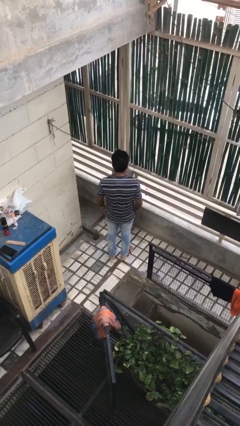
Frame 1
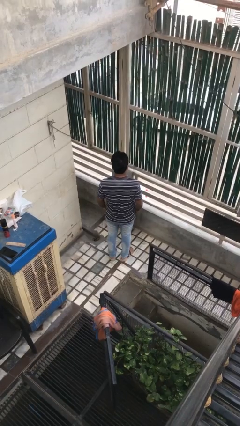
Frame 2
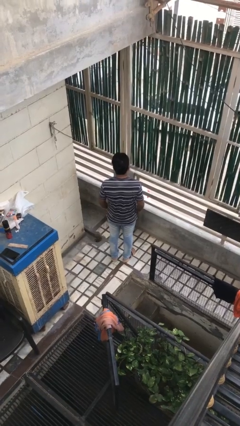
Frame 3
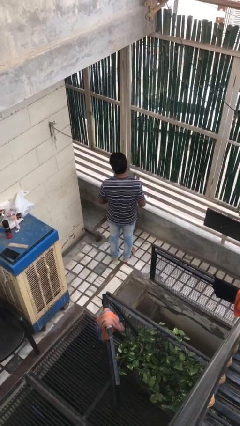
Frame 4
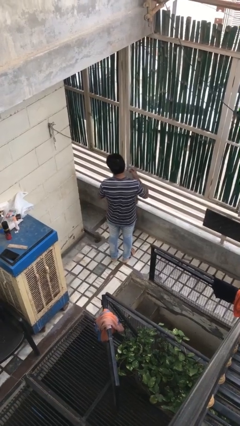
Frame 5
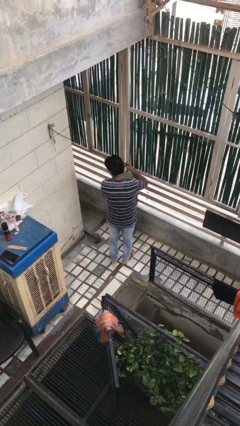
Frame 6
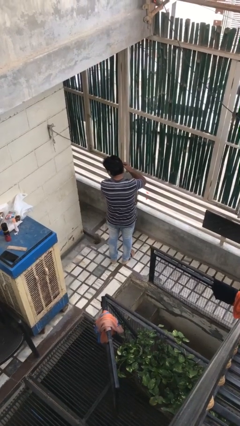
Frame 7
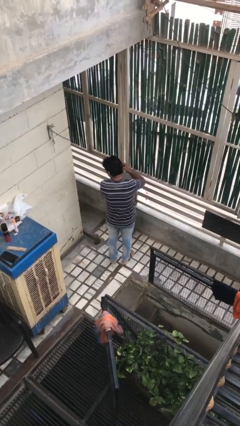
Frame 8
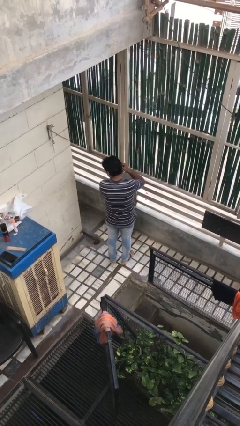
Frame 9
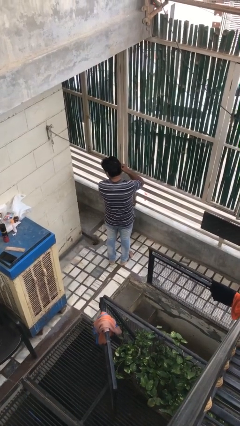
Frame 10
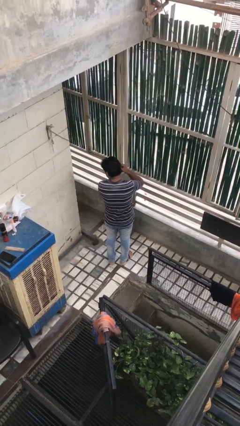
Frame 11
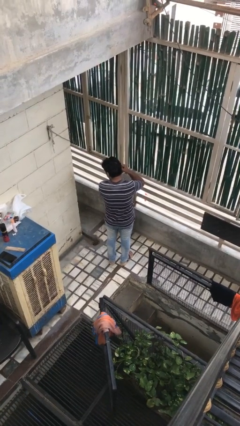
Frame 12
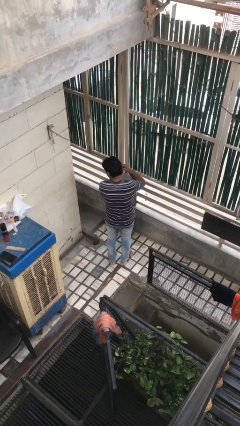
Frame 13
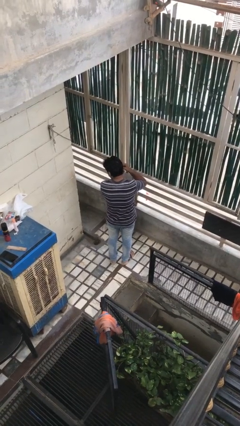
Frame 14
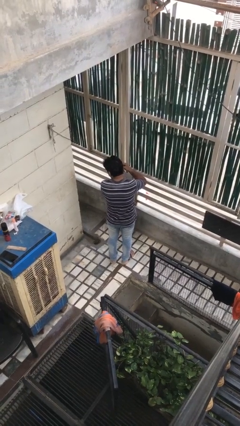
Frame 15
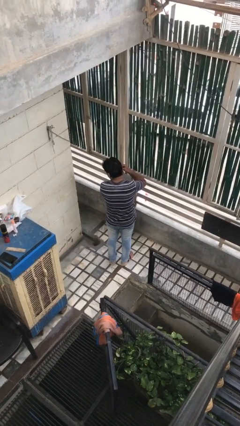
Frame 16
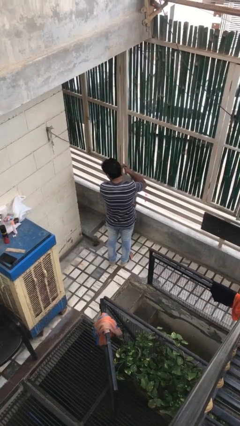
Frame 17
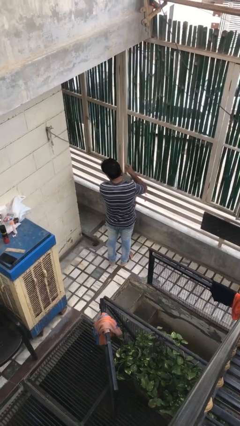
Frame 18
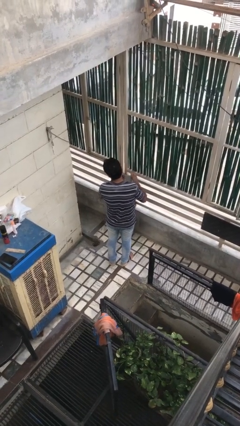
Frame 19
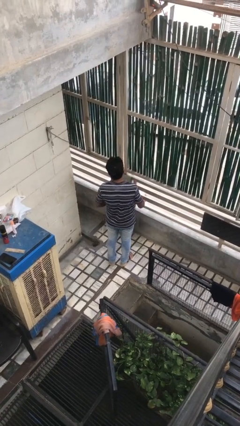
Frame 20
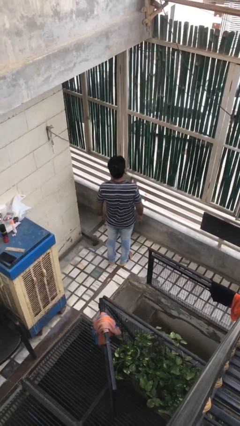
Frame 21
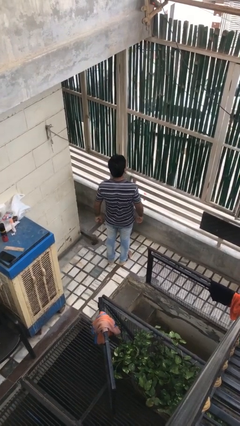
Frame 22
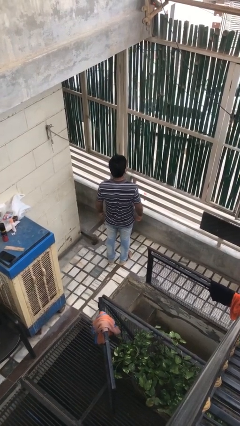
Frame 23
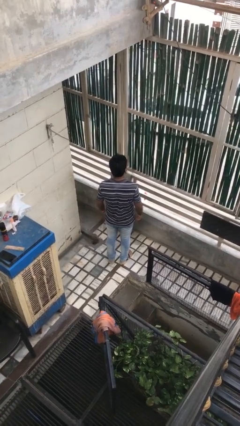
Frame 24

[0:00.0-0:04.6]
person puts on earrings

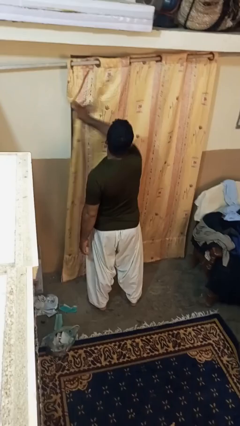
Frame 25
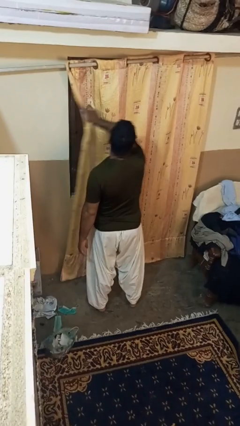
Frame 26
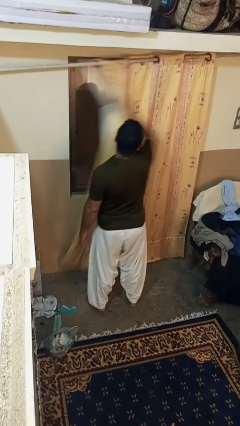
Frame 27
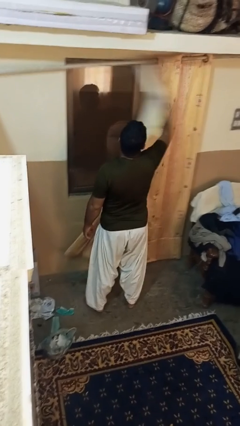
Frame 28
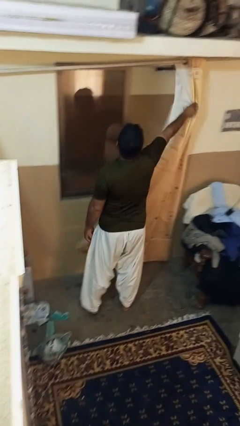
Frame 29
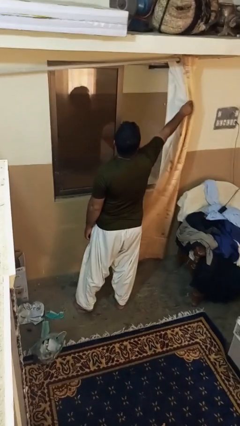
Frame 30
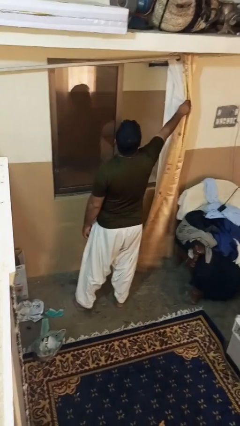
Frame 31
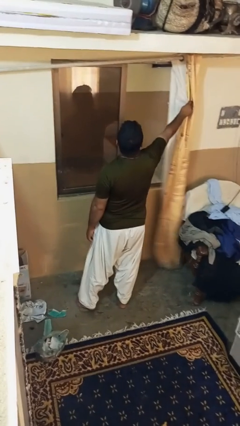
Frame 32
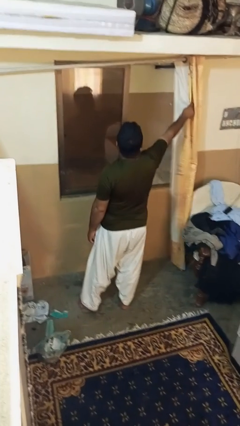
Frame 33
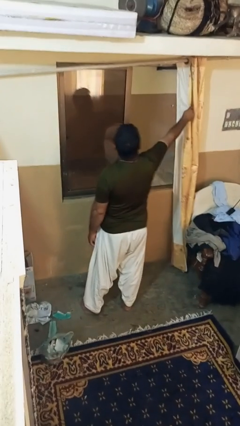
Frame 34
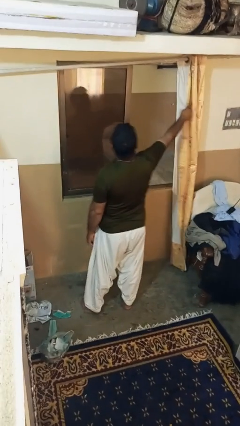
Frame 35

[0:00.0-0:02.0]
person opens curtains

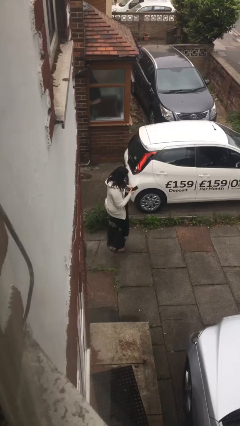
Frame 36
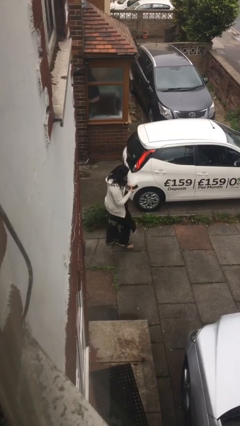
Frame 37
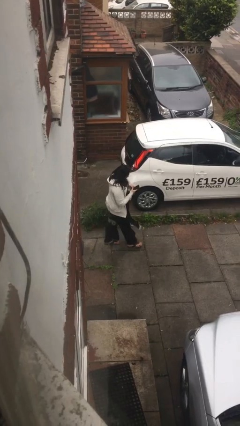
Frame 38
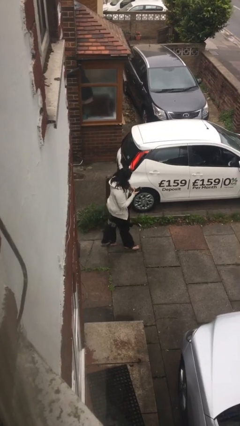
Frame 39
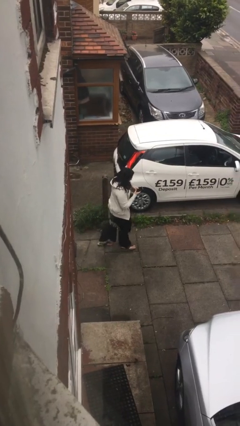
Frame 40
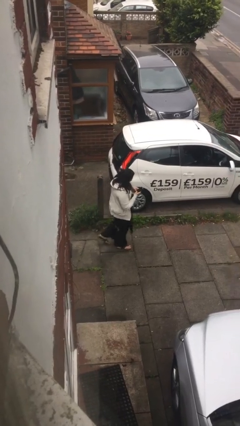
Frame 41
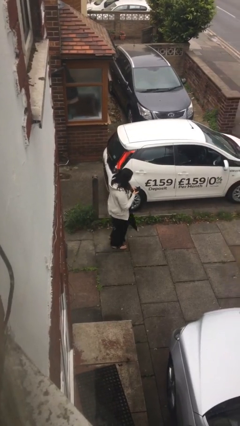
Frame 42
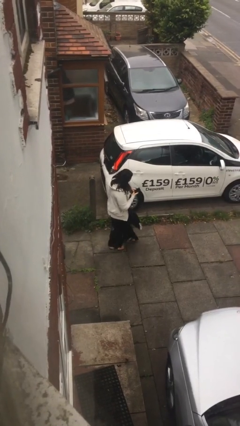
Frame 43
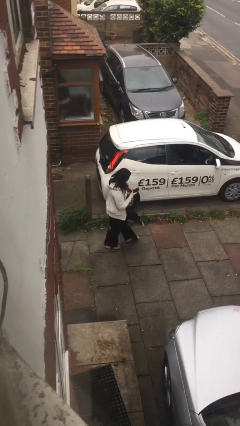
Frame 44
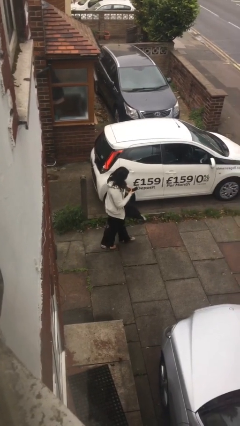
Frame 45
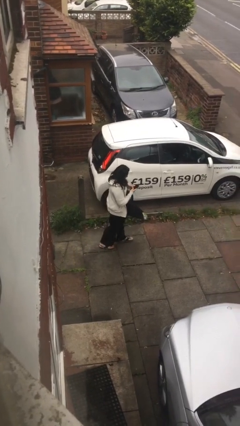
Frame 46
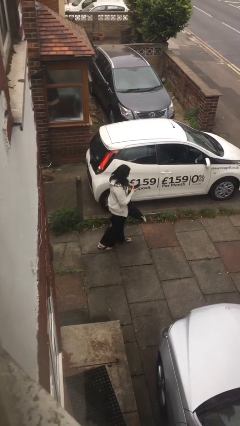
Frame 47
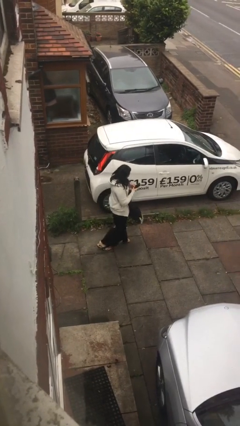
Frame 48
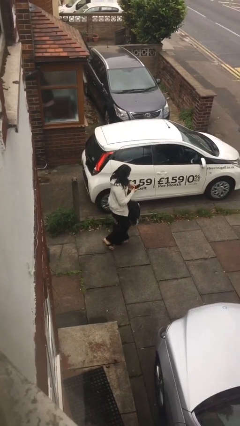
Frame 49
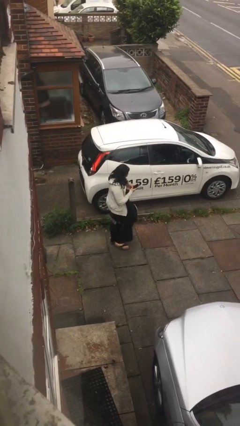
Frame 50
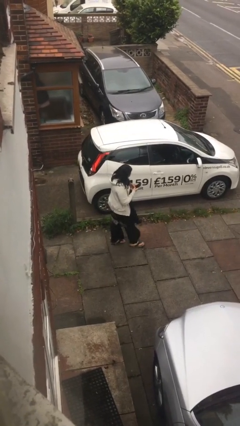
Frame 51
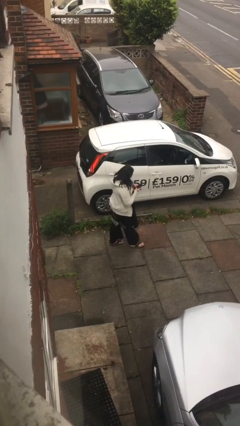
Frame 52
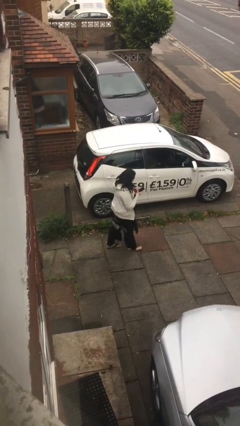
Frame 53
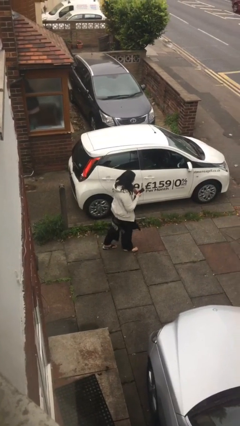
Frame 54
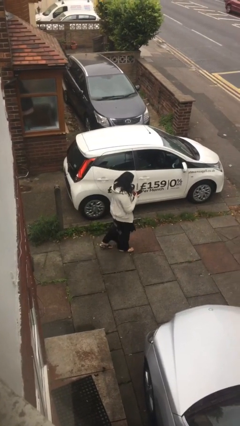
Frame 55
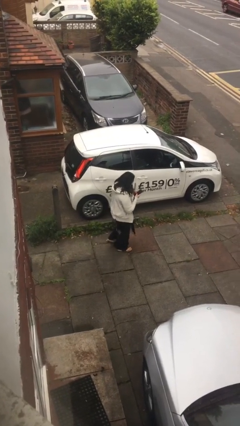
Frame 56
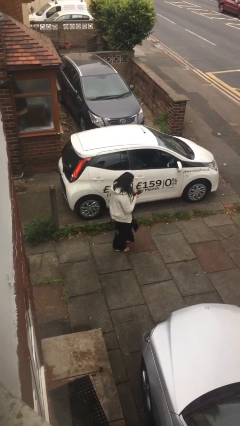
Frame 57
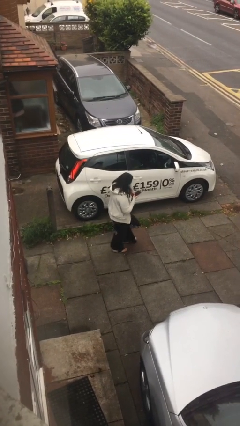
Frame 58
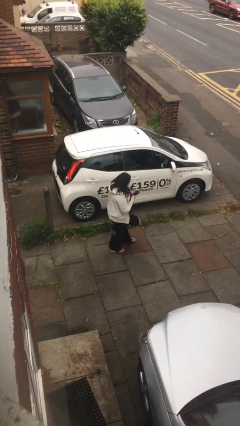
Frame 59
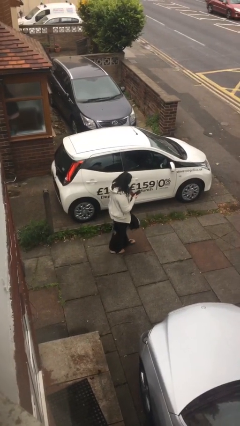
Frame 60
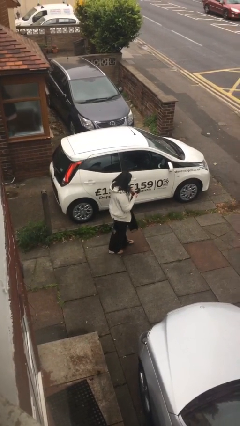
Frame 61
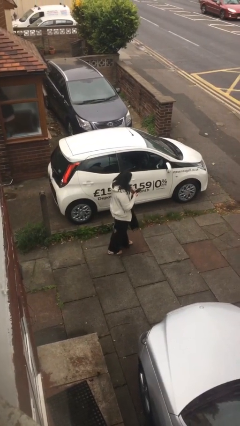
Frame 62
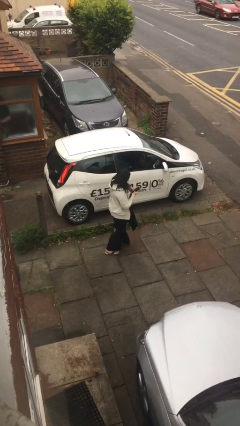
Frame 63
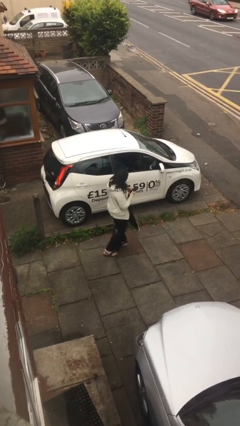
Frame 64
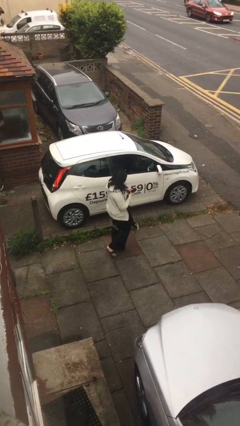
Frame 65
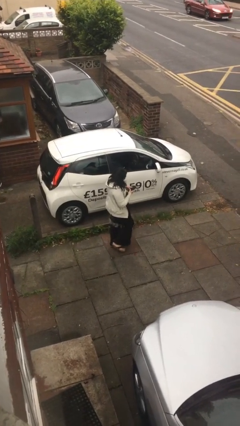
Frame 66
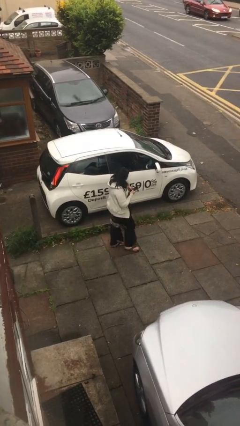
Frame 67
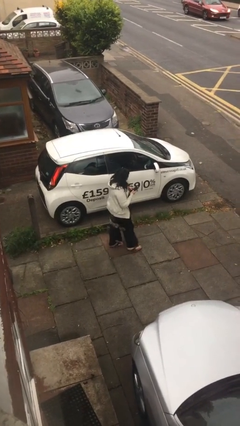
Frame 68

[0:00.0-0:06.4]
person texts on phone

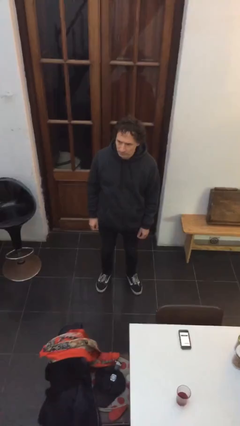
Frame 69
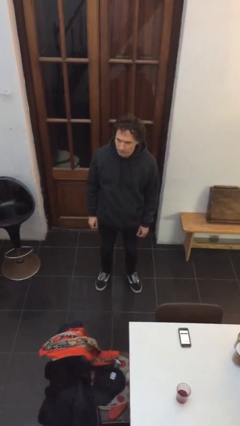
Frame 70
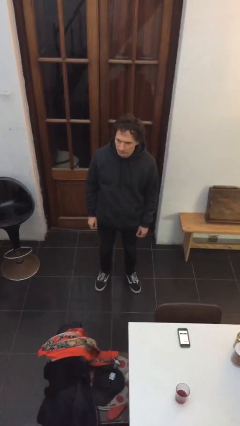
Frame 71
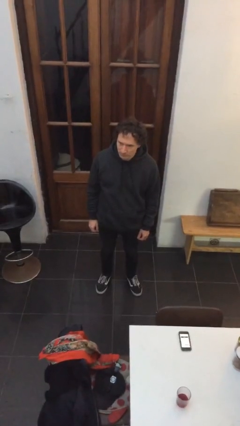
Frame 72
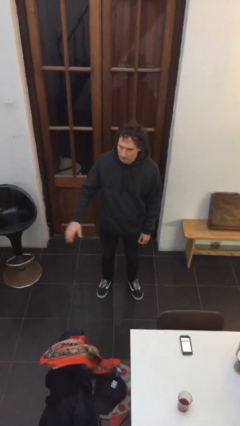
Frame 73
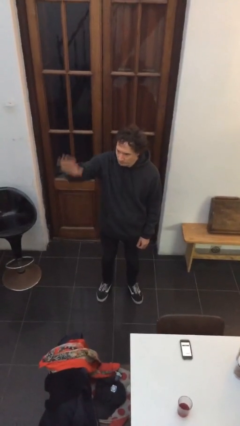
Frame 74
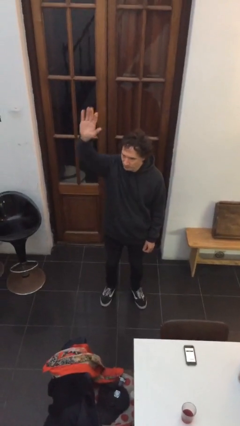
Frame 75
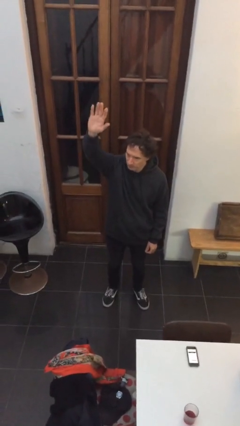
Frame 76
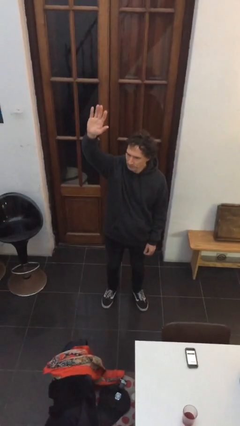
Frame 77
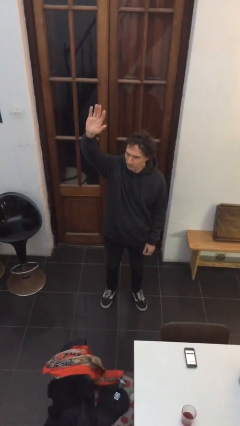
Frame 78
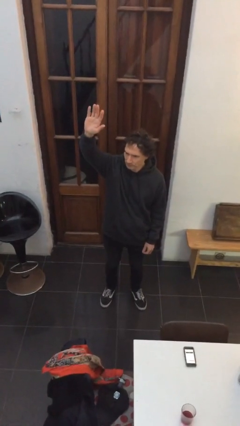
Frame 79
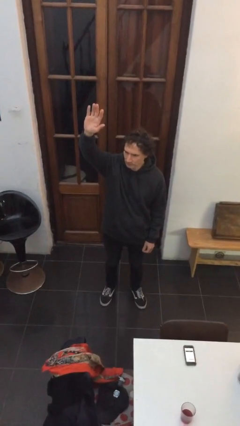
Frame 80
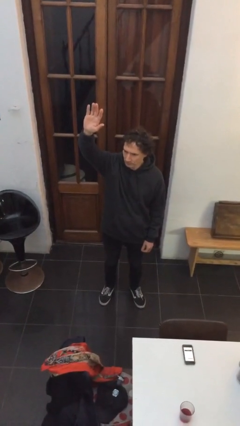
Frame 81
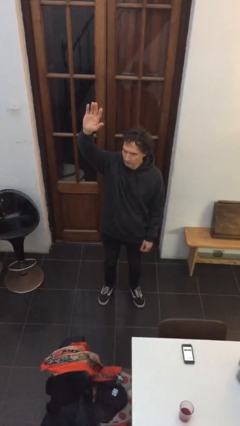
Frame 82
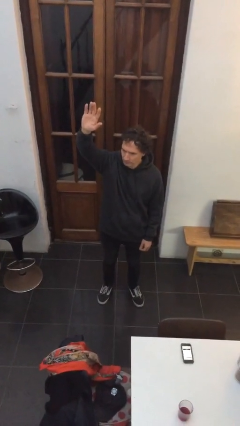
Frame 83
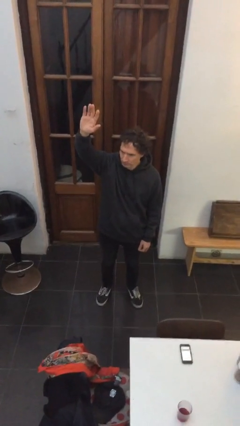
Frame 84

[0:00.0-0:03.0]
person gestures raise hand

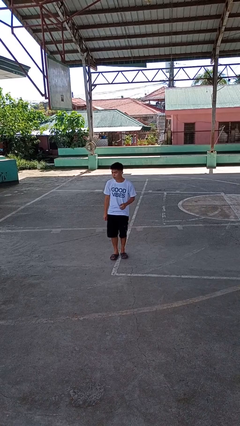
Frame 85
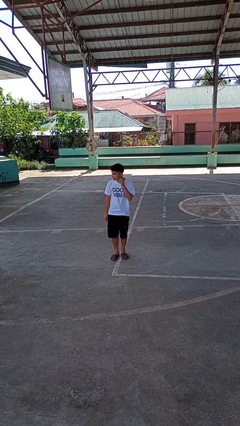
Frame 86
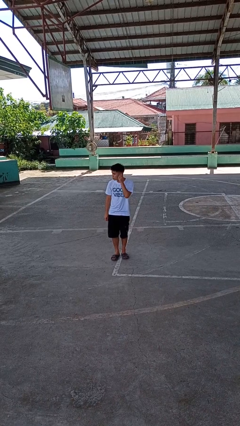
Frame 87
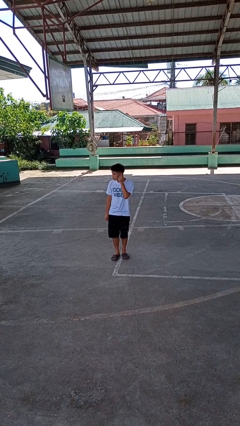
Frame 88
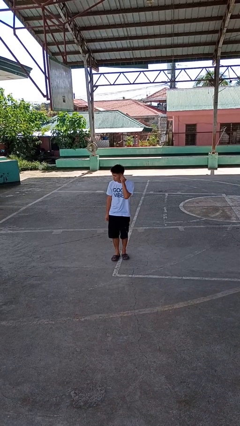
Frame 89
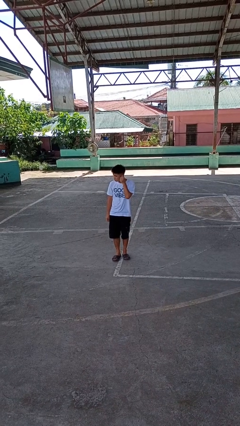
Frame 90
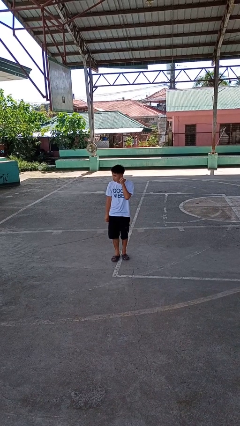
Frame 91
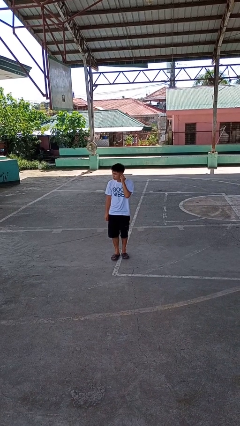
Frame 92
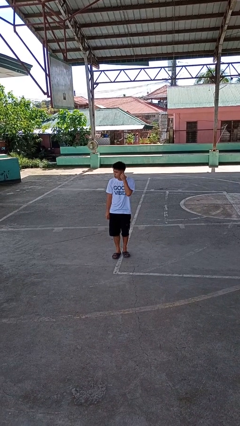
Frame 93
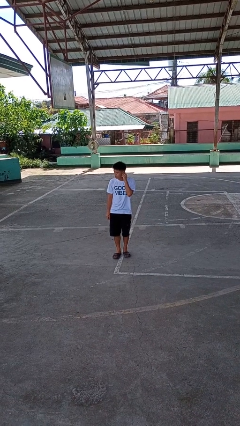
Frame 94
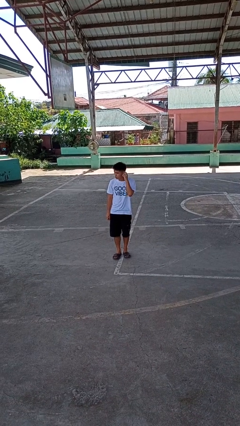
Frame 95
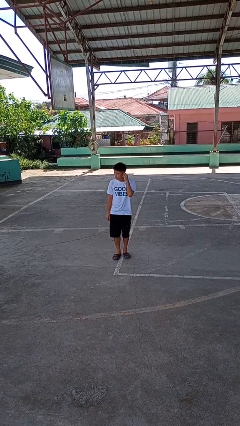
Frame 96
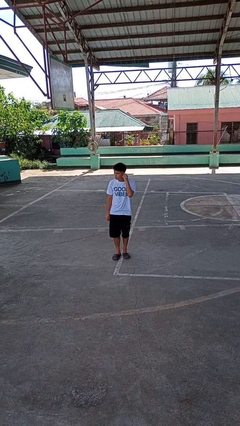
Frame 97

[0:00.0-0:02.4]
person touches earlobe
